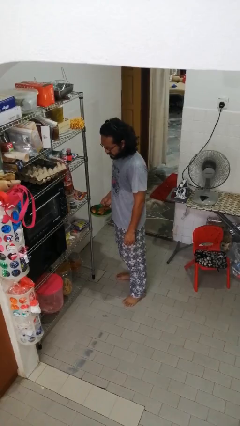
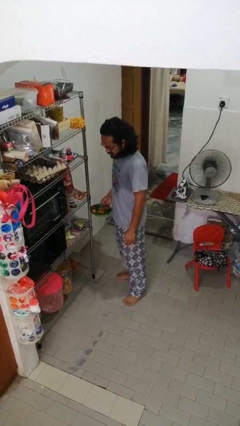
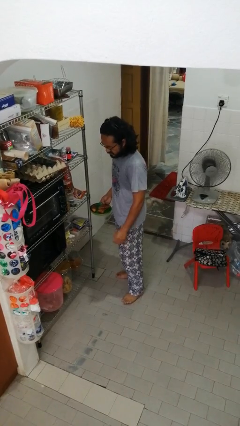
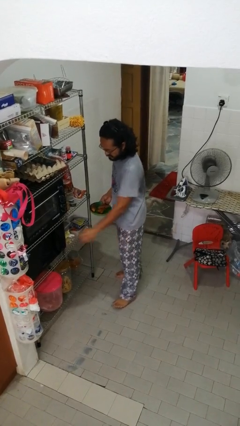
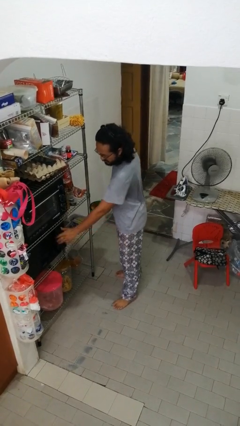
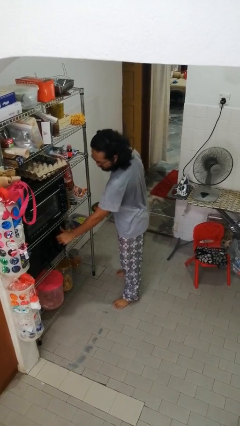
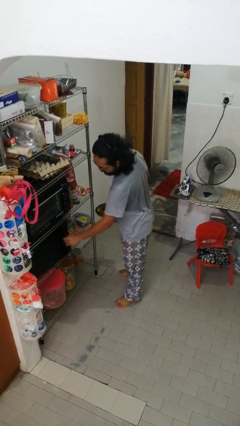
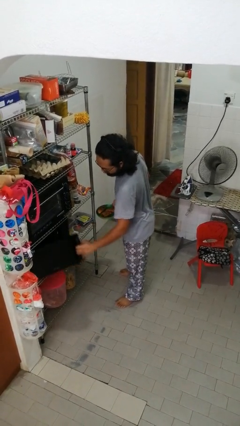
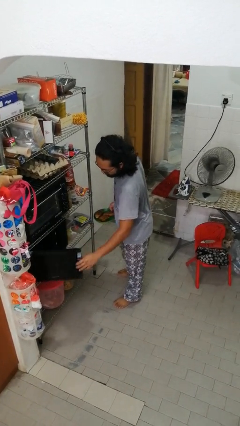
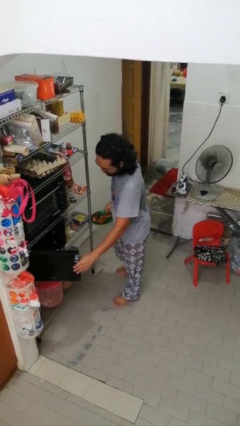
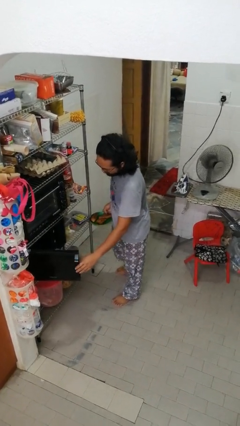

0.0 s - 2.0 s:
person opens microwave

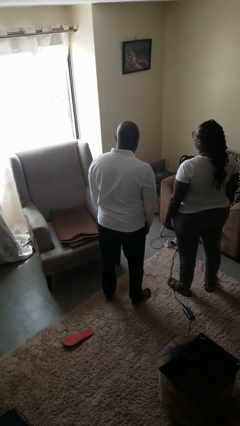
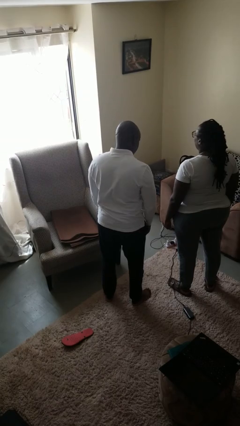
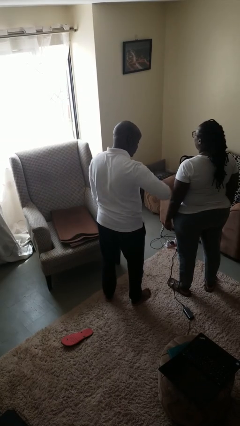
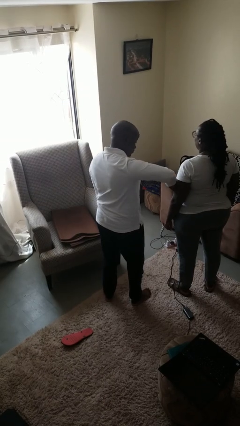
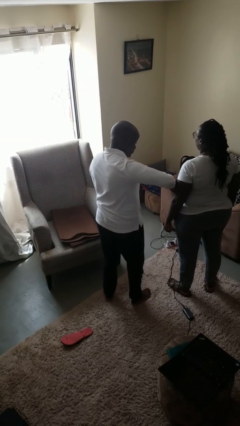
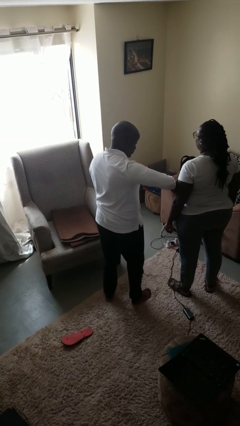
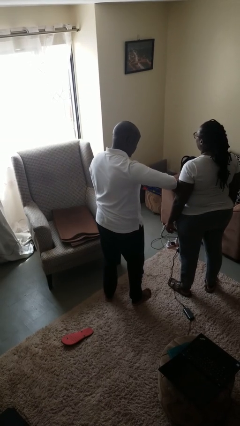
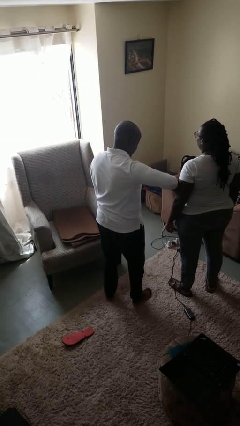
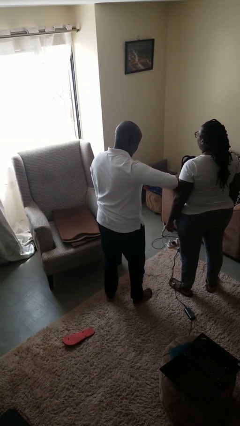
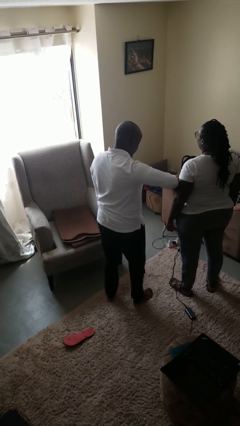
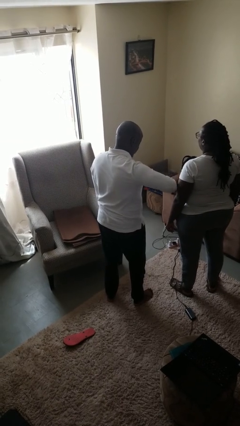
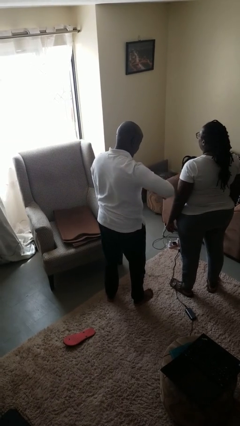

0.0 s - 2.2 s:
person grabs person by bicep

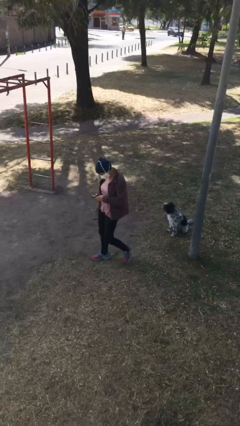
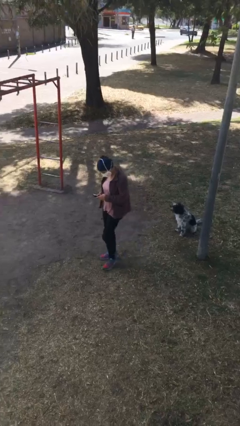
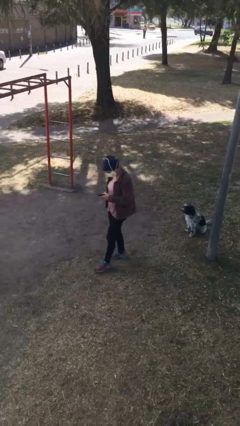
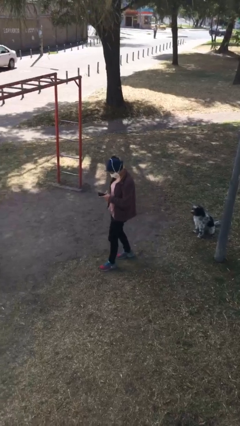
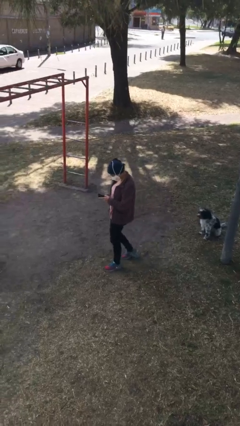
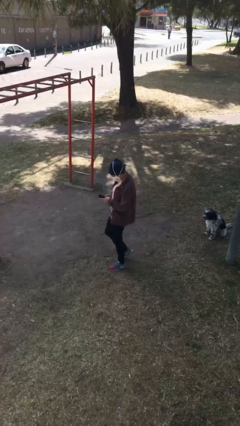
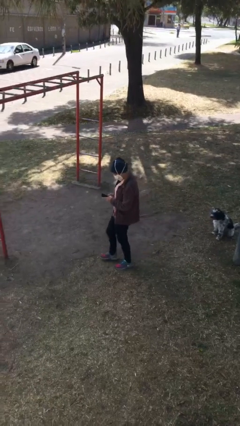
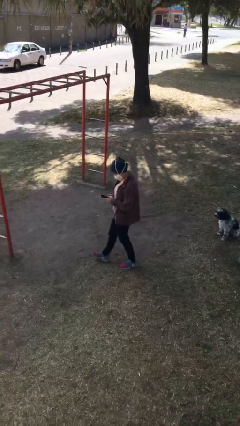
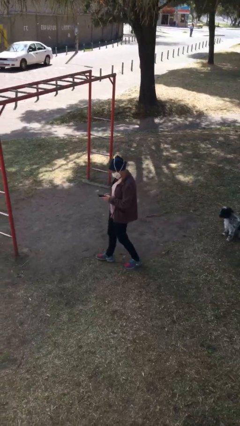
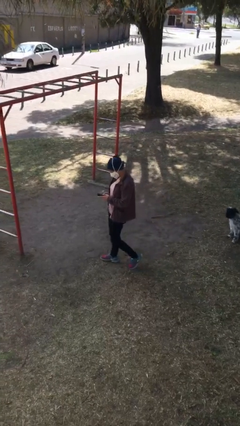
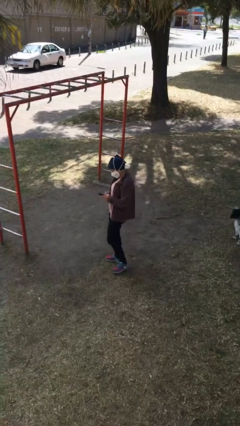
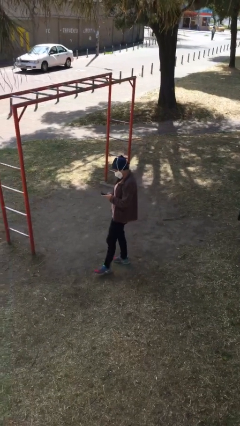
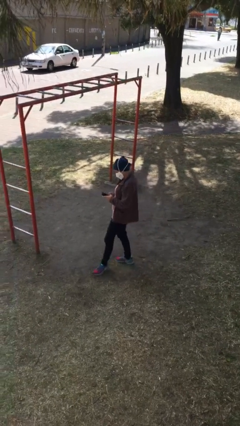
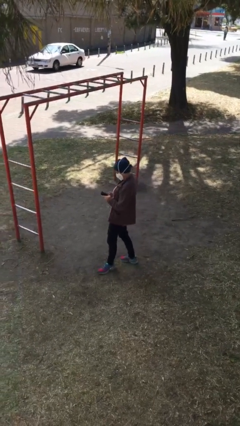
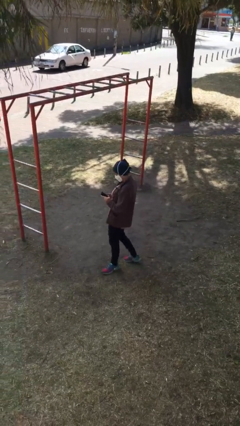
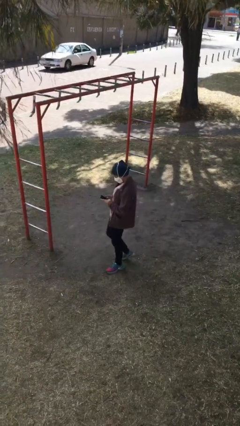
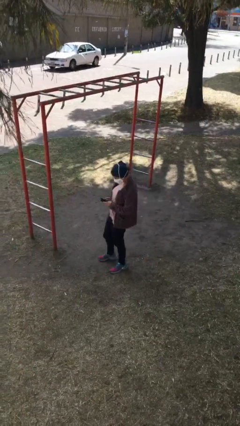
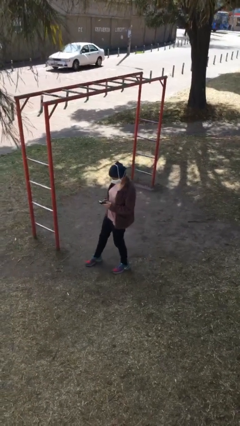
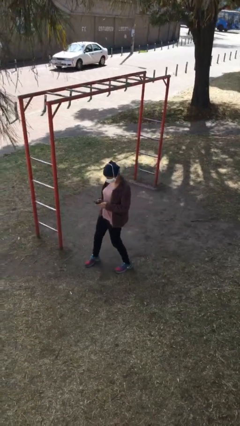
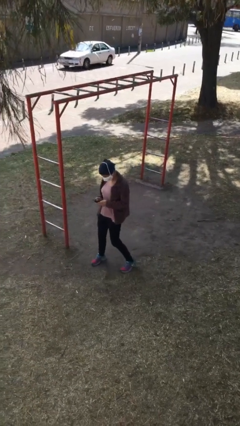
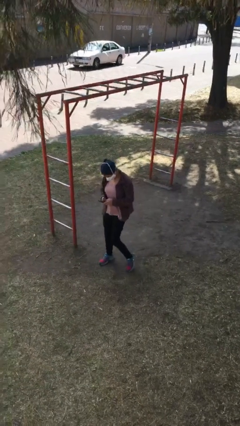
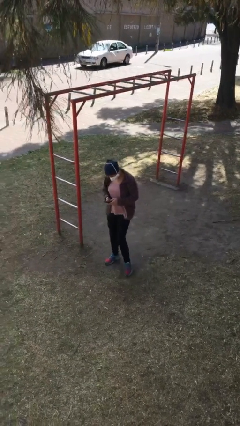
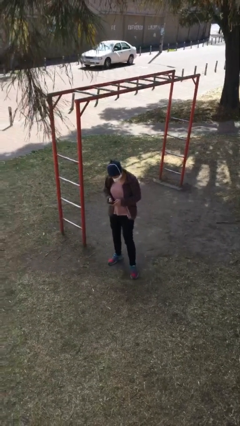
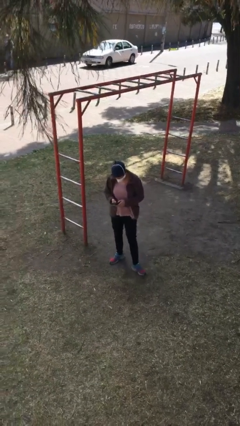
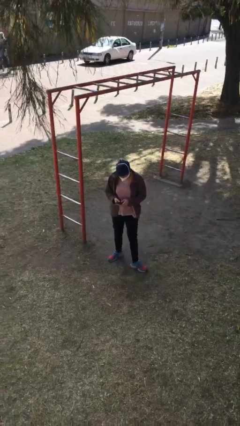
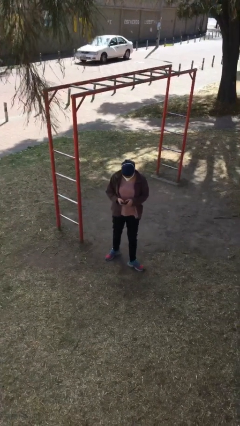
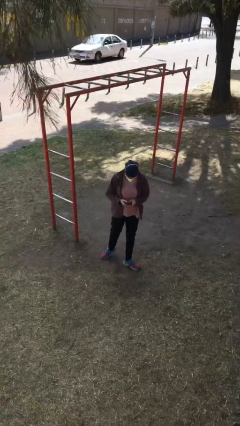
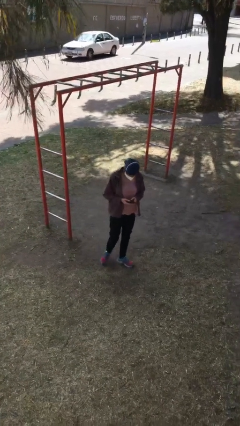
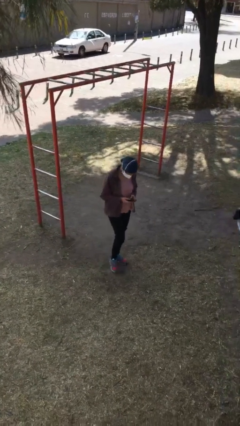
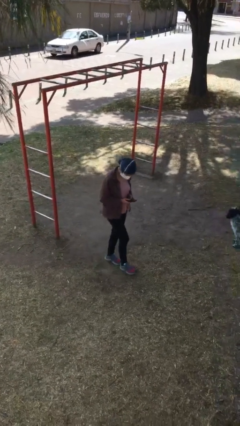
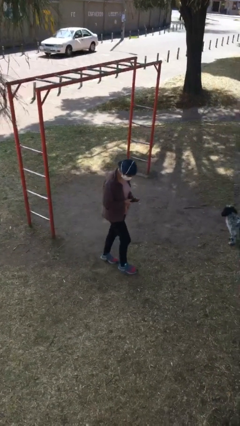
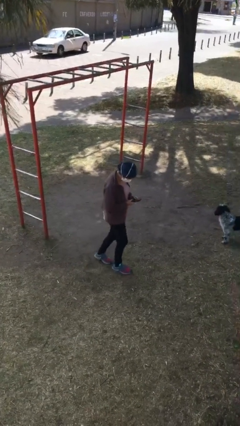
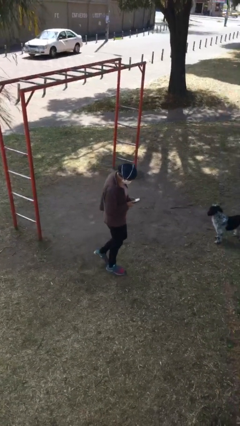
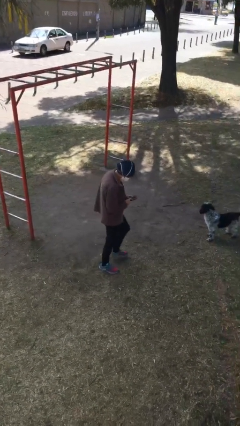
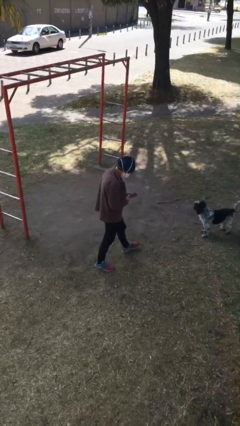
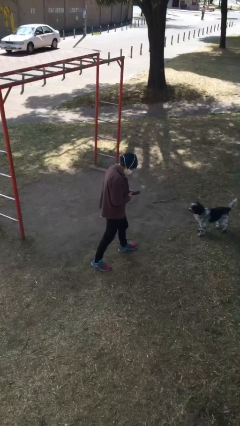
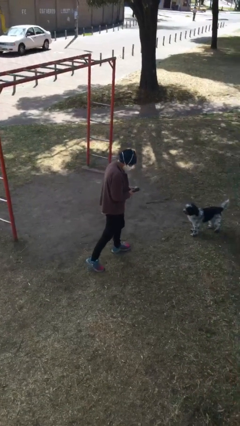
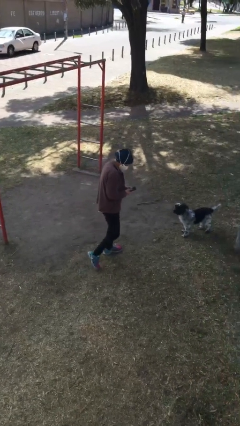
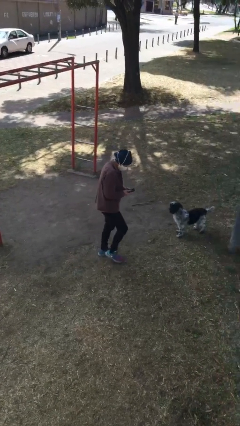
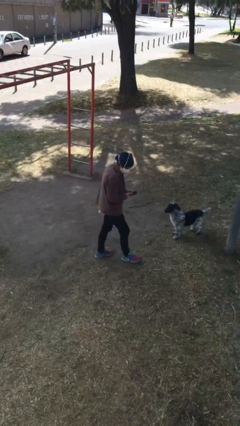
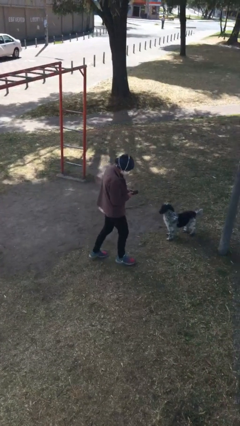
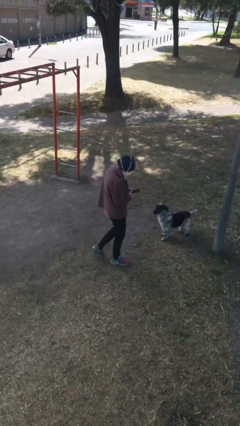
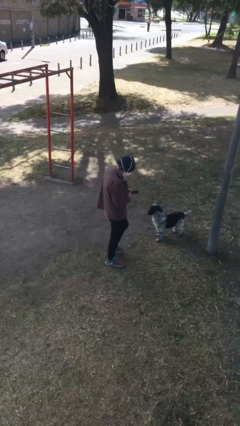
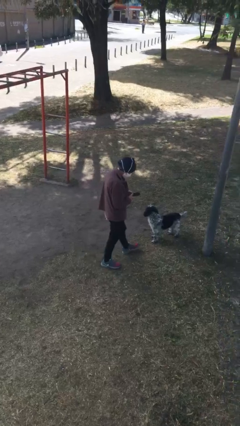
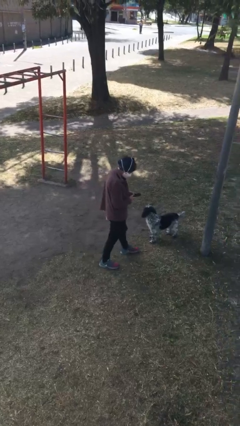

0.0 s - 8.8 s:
person texts on phone

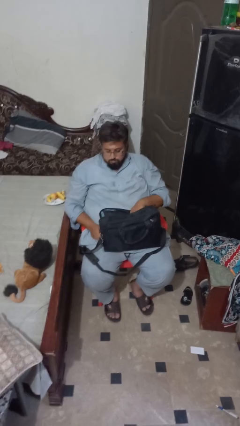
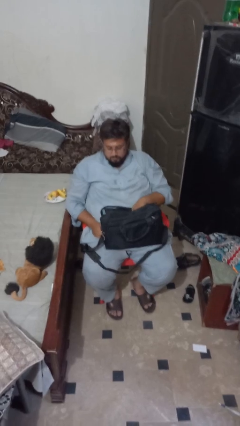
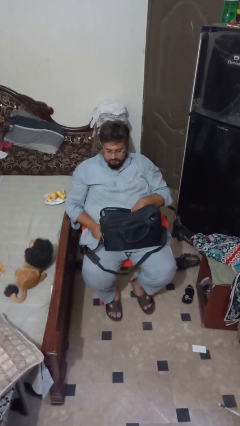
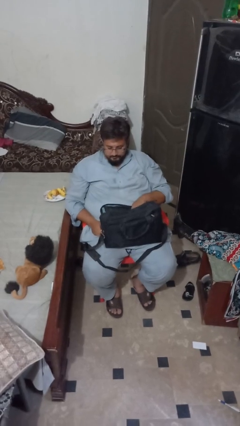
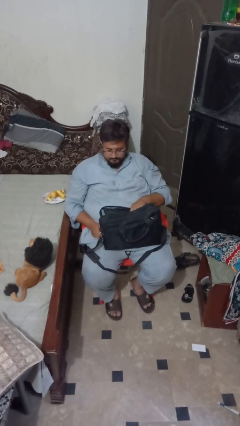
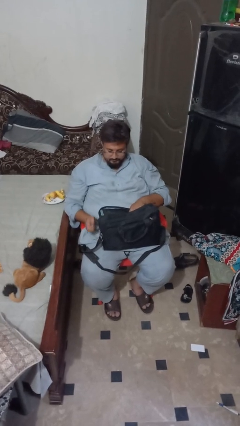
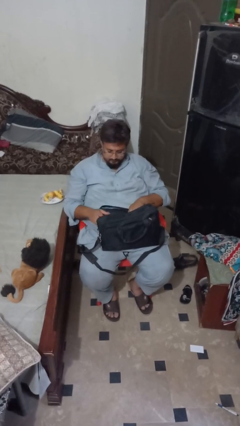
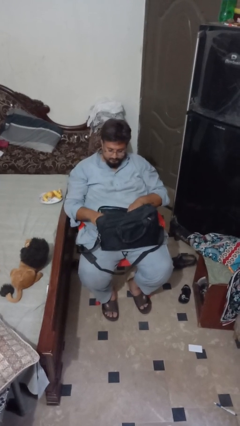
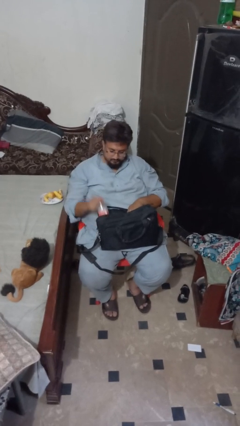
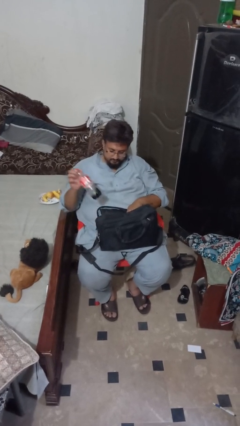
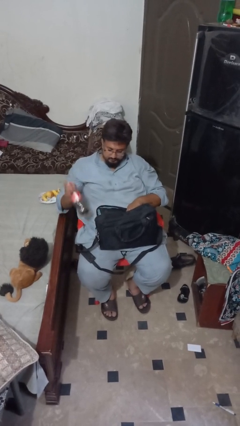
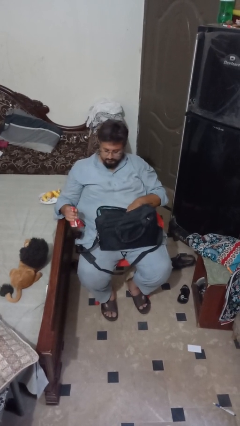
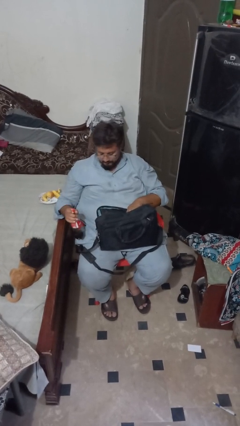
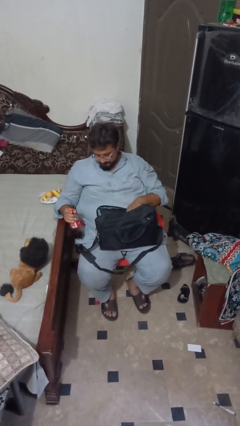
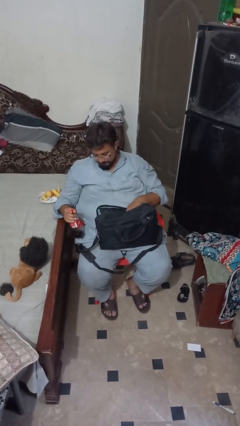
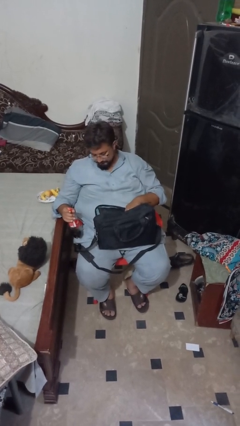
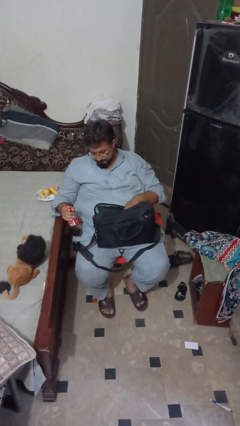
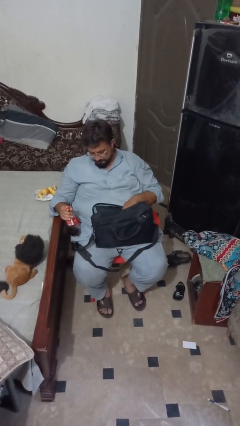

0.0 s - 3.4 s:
person takes object from bag

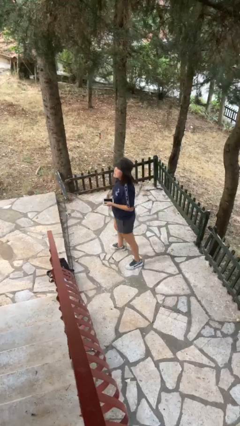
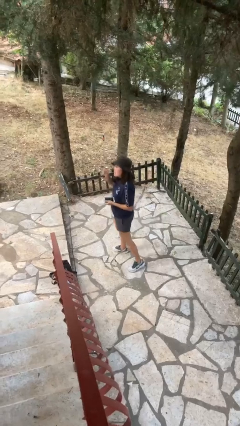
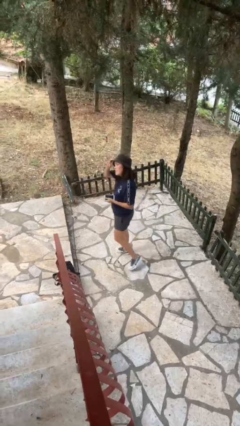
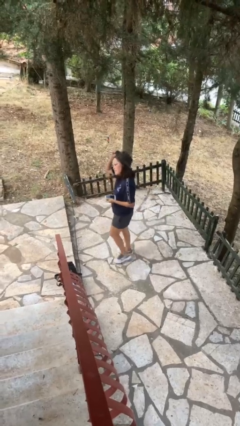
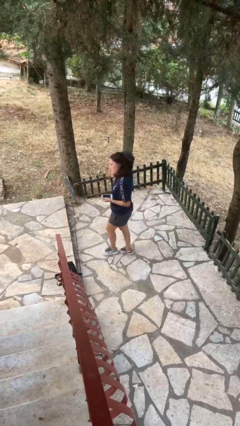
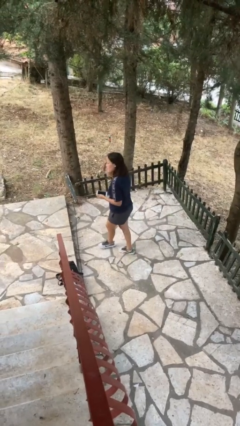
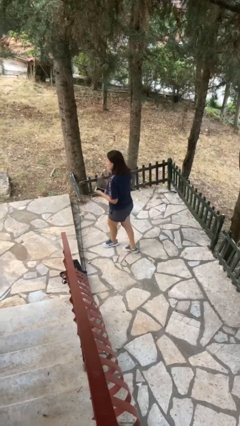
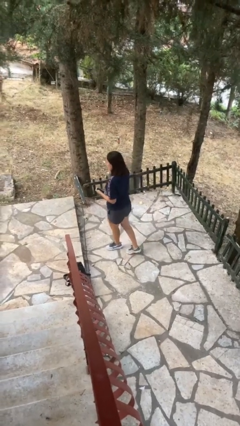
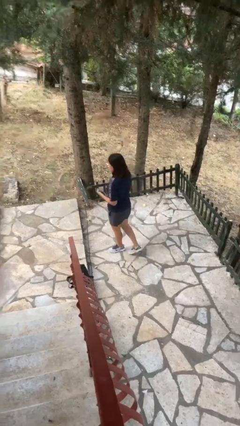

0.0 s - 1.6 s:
person takes off hat
